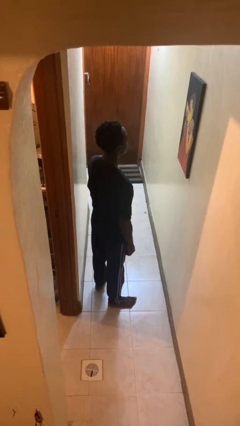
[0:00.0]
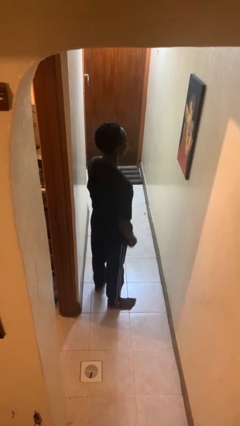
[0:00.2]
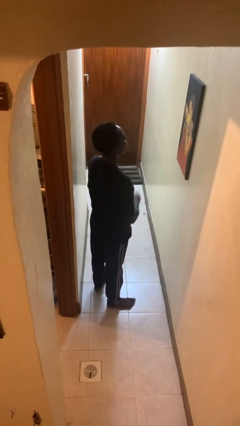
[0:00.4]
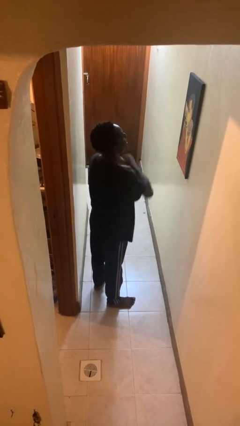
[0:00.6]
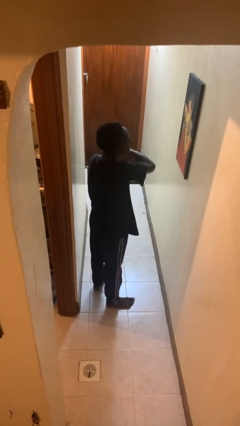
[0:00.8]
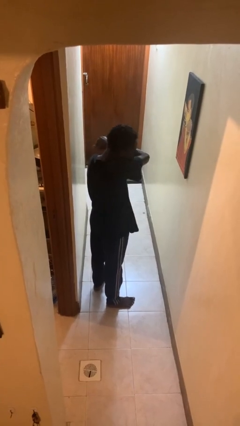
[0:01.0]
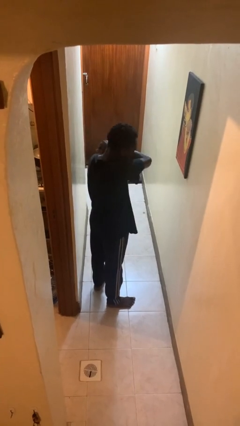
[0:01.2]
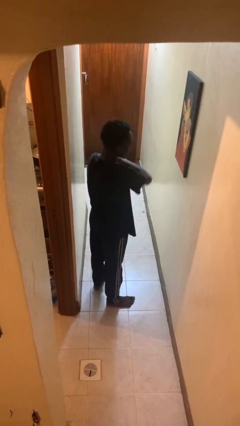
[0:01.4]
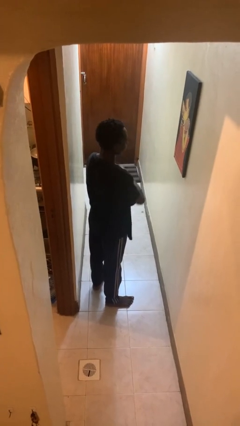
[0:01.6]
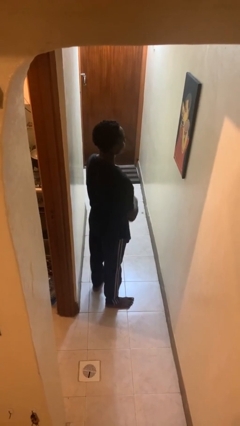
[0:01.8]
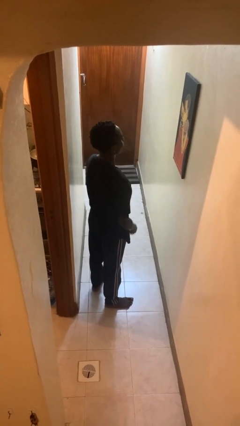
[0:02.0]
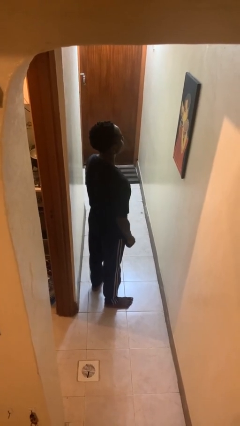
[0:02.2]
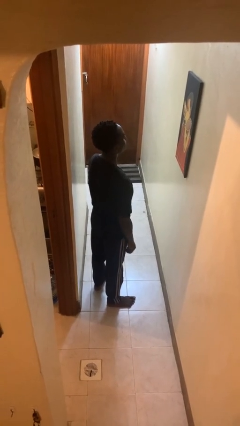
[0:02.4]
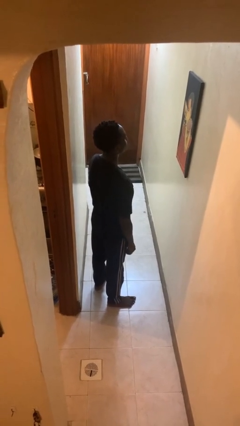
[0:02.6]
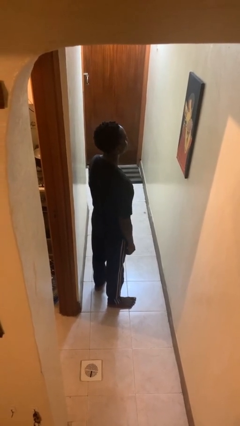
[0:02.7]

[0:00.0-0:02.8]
person sneezes into arm

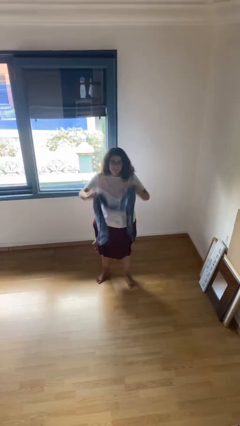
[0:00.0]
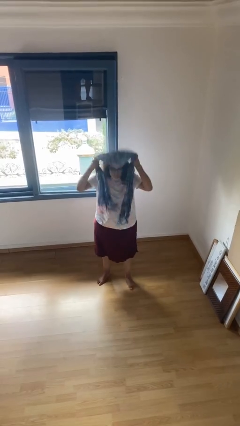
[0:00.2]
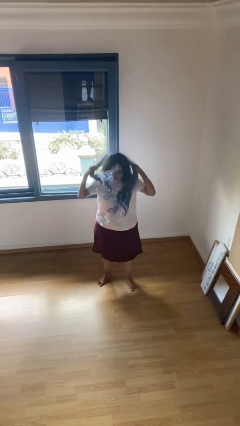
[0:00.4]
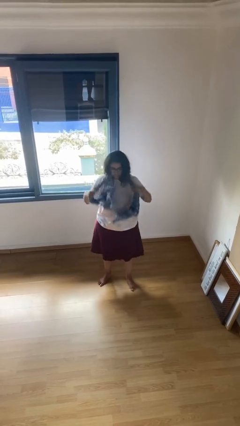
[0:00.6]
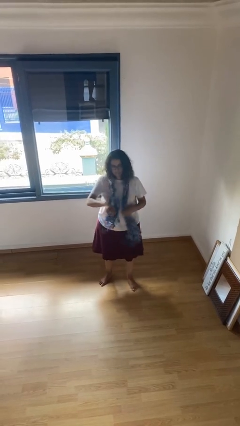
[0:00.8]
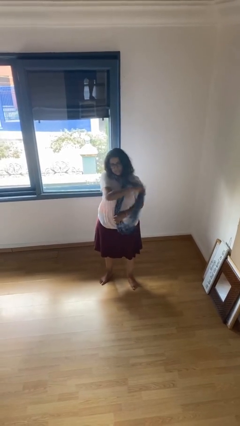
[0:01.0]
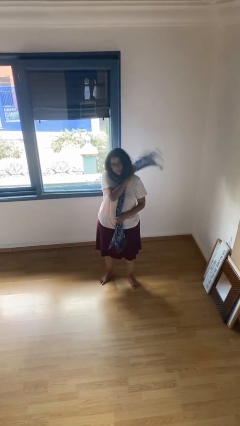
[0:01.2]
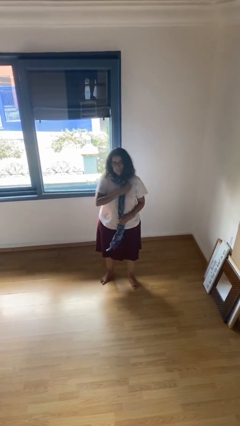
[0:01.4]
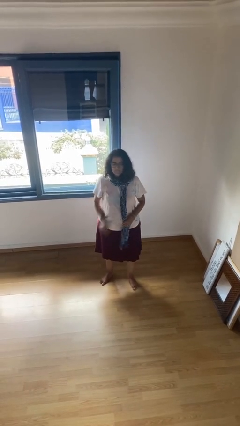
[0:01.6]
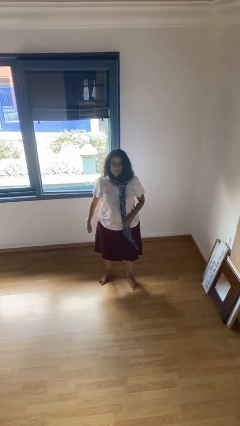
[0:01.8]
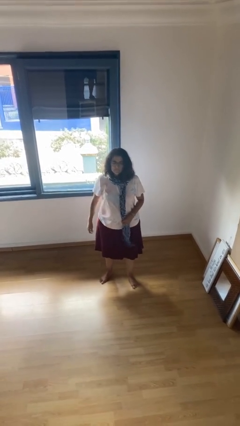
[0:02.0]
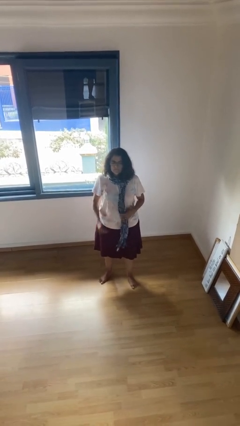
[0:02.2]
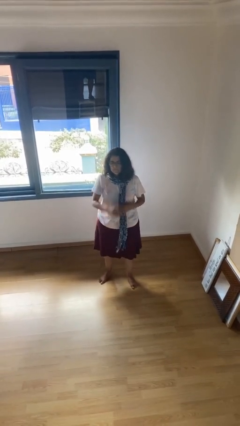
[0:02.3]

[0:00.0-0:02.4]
person puts on scarf

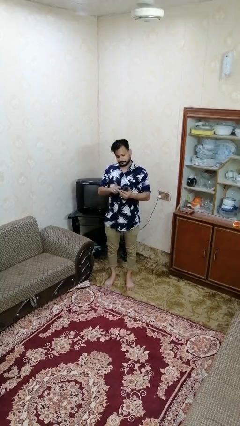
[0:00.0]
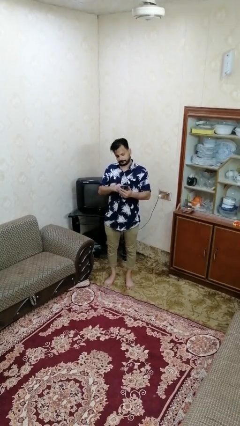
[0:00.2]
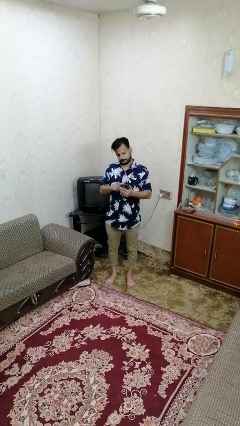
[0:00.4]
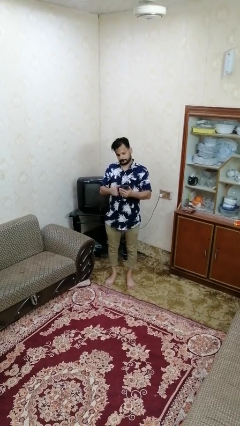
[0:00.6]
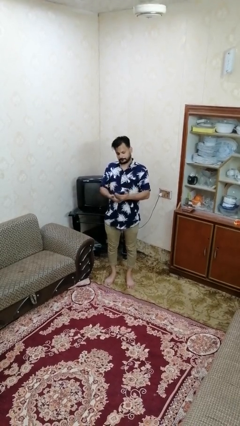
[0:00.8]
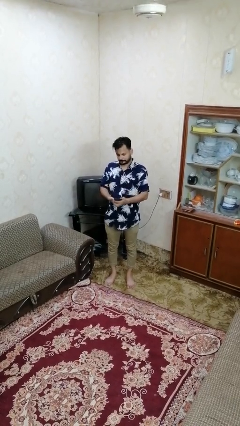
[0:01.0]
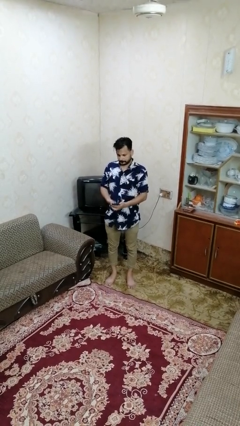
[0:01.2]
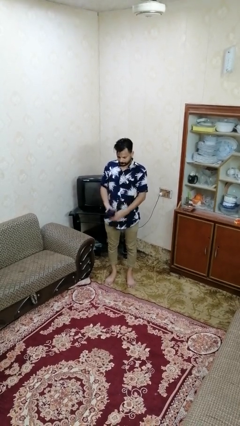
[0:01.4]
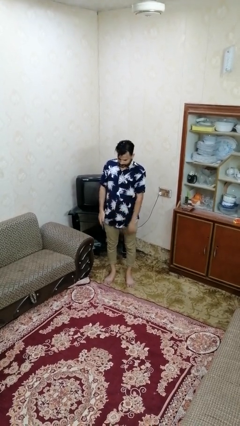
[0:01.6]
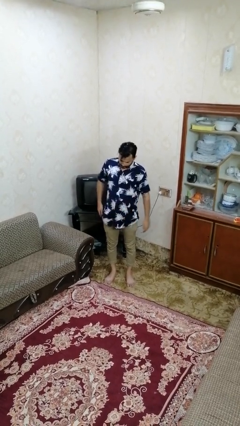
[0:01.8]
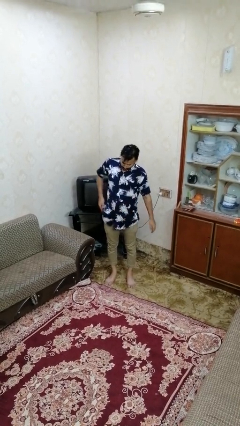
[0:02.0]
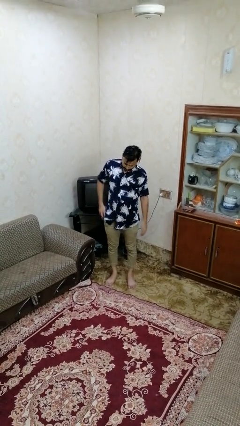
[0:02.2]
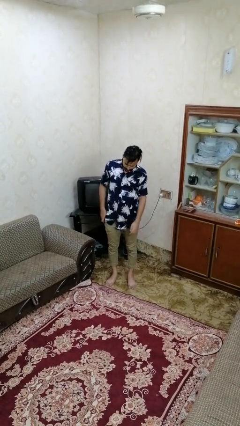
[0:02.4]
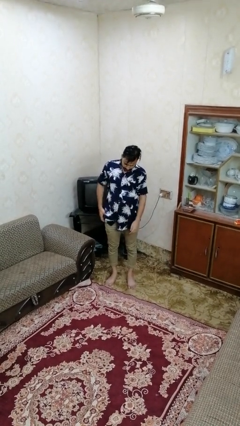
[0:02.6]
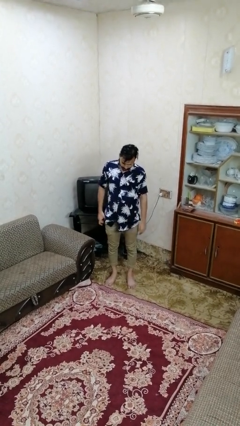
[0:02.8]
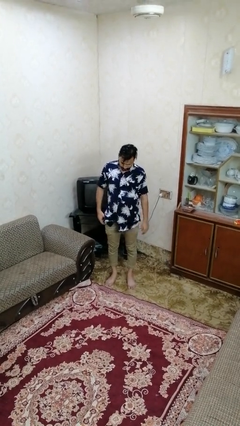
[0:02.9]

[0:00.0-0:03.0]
person puts phone into pocket

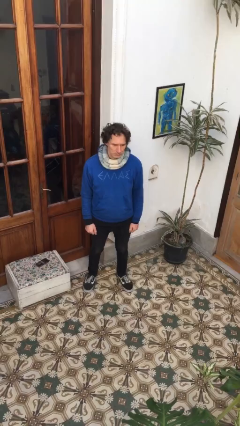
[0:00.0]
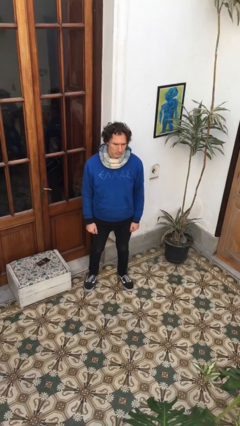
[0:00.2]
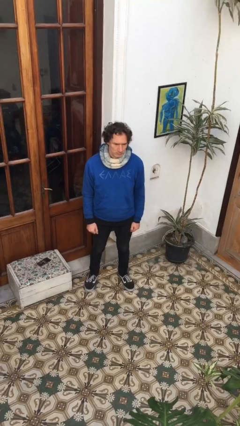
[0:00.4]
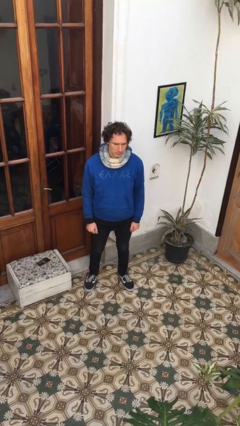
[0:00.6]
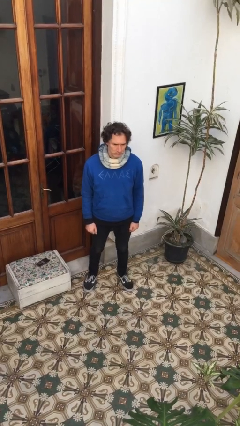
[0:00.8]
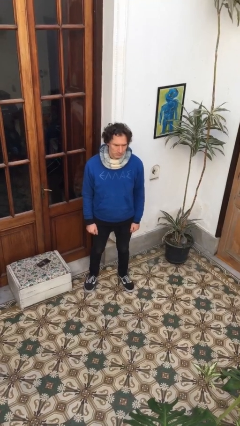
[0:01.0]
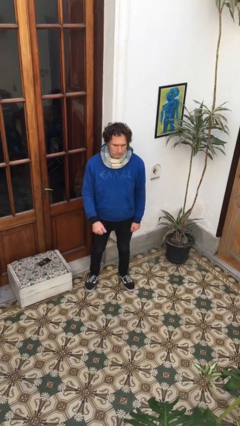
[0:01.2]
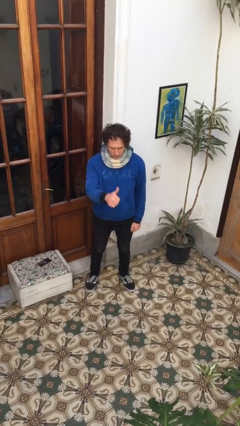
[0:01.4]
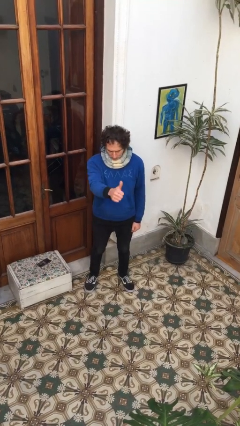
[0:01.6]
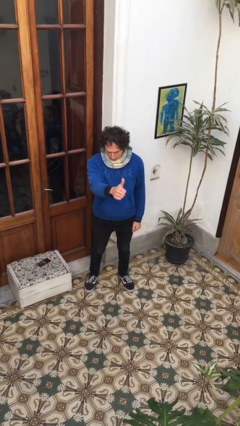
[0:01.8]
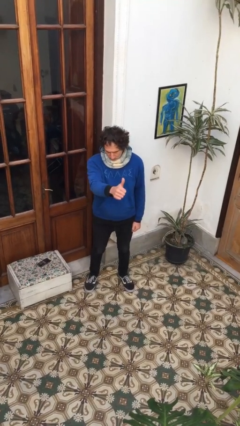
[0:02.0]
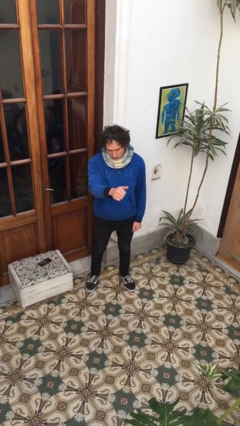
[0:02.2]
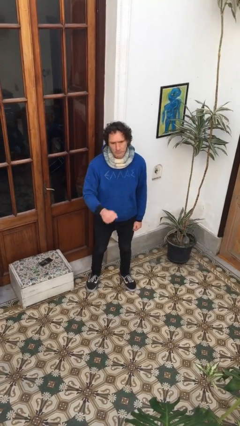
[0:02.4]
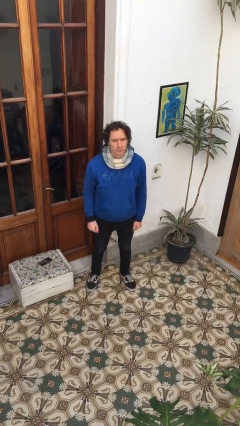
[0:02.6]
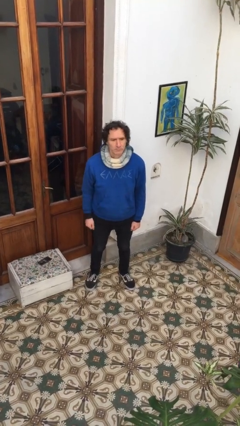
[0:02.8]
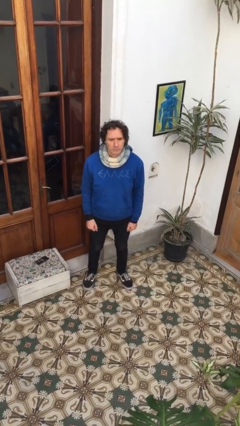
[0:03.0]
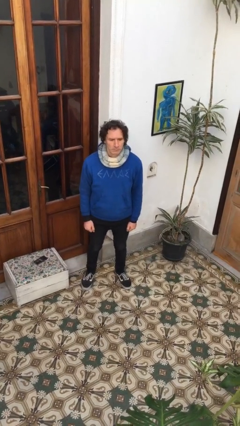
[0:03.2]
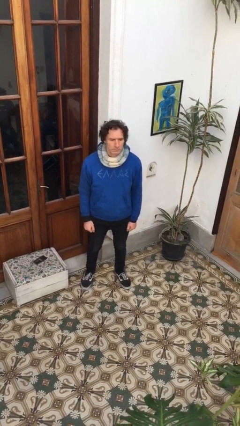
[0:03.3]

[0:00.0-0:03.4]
person gestures thumbs up

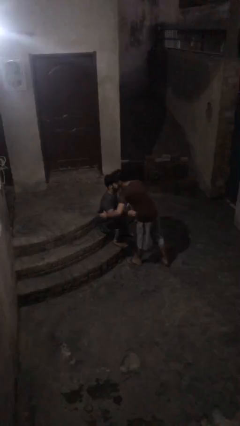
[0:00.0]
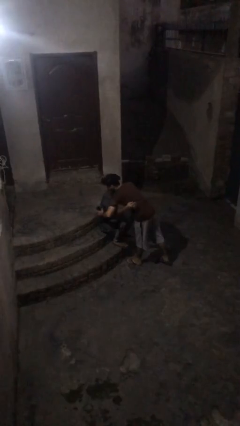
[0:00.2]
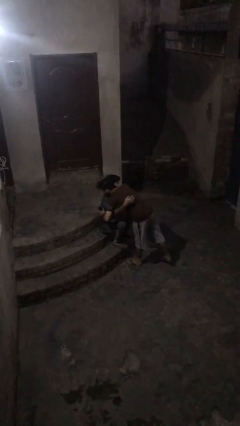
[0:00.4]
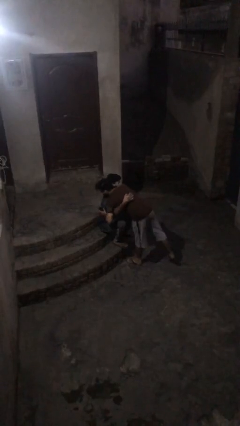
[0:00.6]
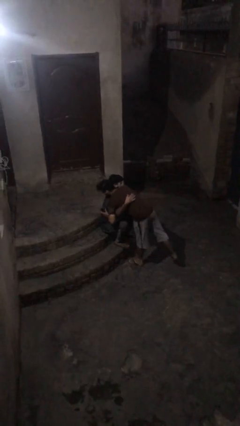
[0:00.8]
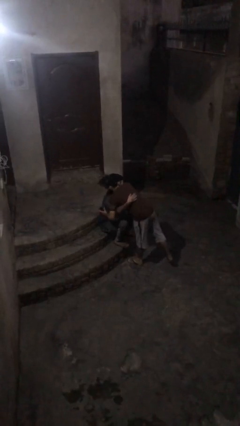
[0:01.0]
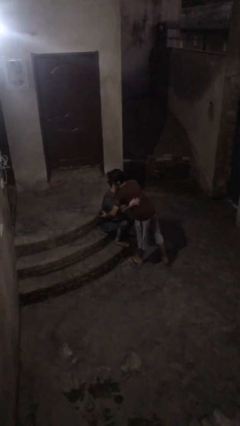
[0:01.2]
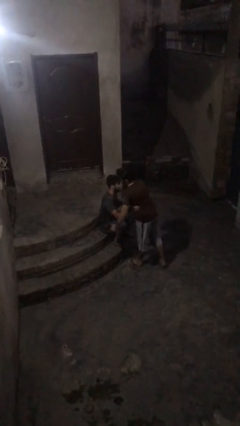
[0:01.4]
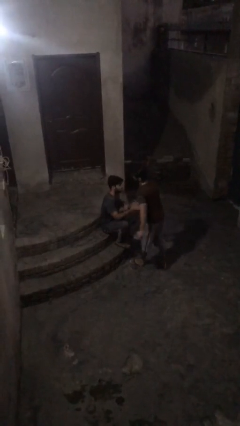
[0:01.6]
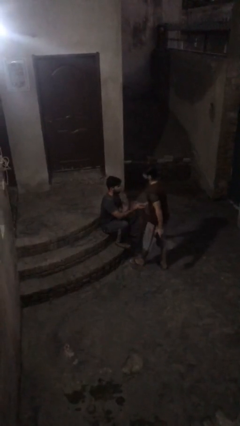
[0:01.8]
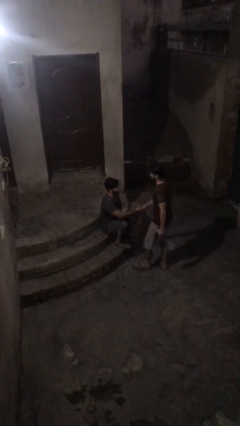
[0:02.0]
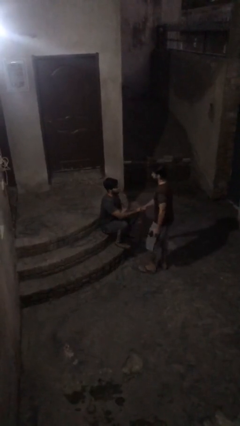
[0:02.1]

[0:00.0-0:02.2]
person embraces person

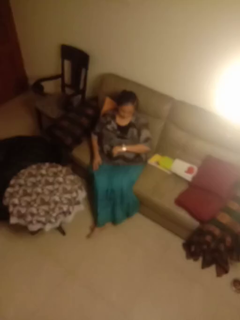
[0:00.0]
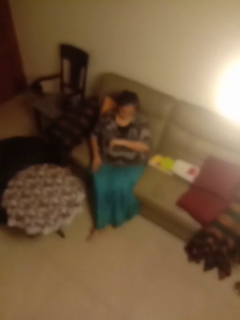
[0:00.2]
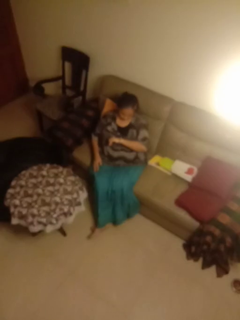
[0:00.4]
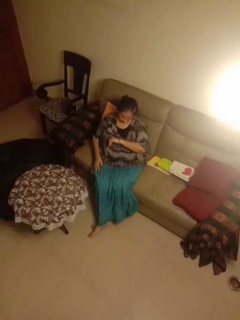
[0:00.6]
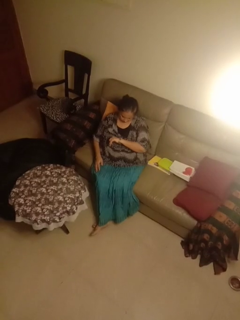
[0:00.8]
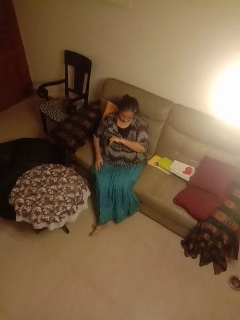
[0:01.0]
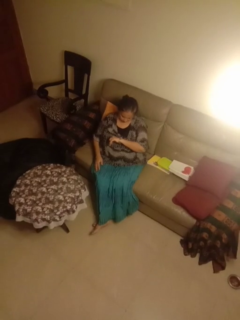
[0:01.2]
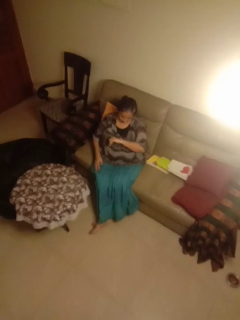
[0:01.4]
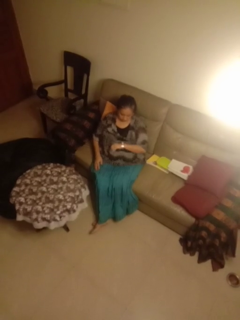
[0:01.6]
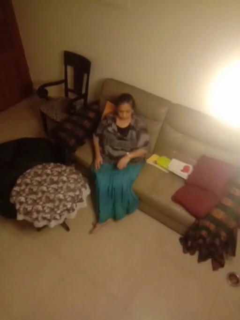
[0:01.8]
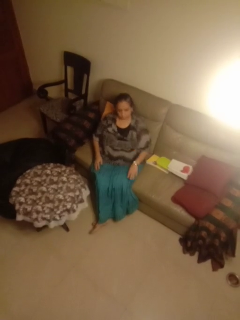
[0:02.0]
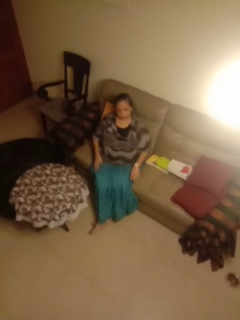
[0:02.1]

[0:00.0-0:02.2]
person looks at wristwatch

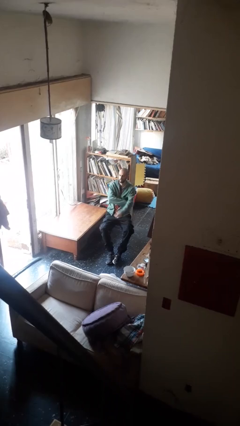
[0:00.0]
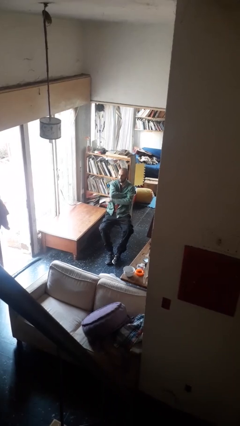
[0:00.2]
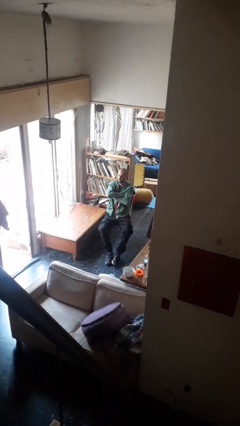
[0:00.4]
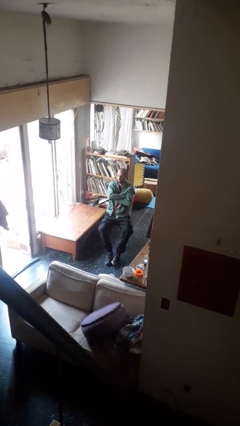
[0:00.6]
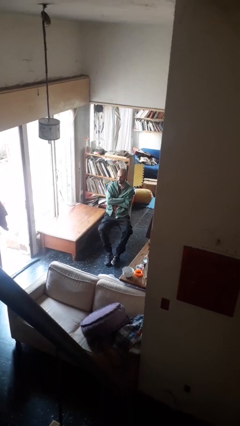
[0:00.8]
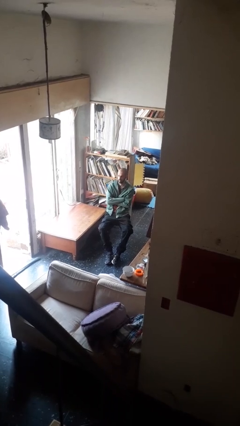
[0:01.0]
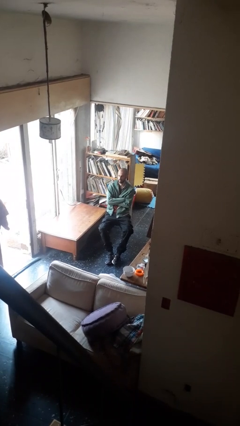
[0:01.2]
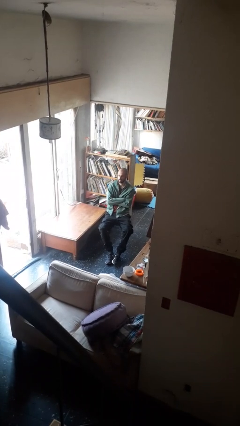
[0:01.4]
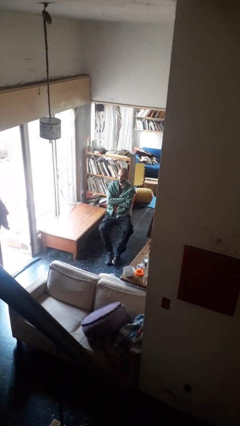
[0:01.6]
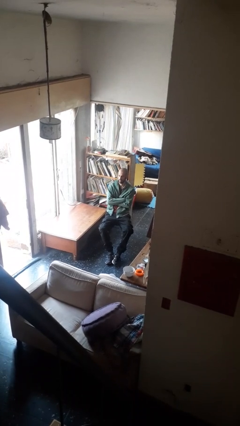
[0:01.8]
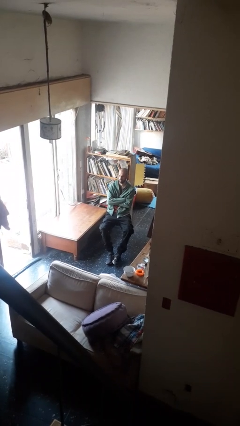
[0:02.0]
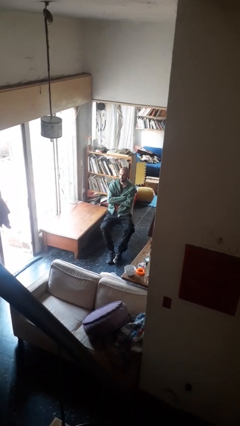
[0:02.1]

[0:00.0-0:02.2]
person crosses arms
